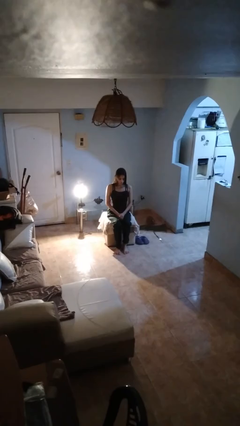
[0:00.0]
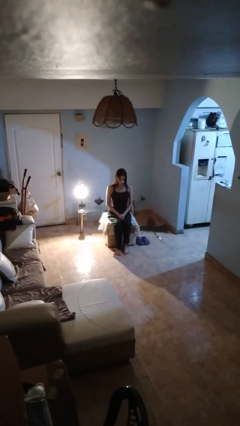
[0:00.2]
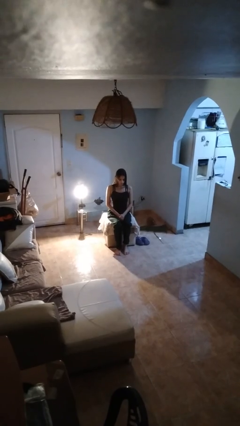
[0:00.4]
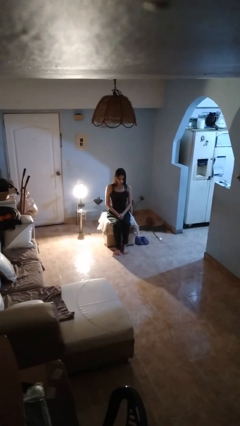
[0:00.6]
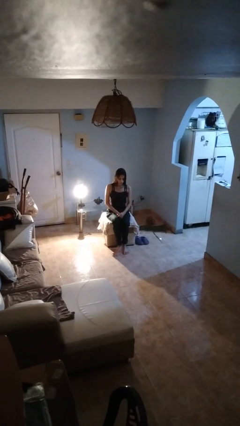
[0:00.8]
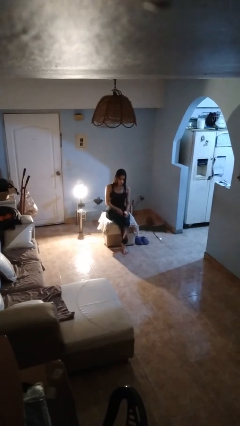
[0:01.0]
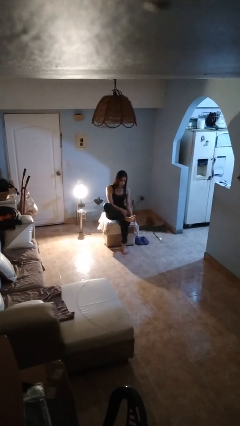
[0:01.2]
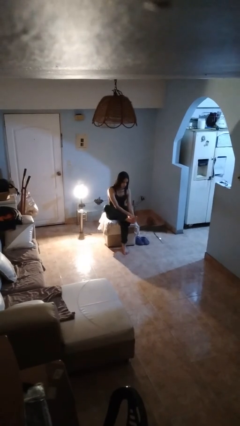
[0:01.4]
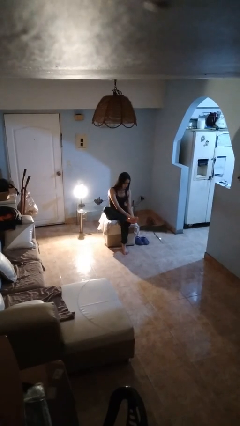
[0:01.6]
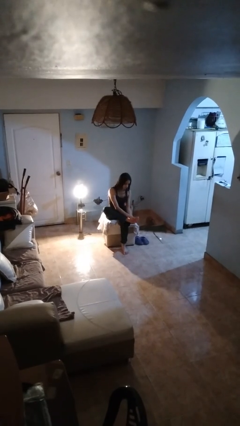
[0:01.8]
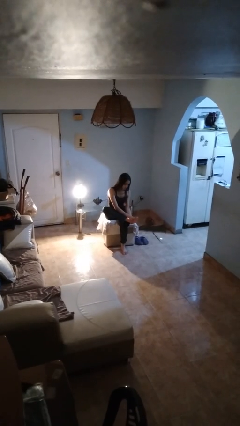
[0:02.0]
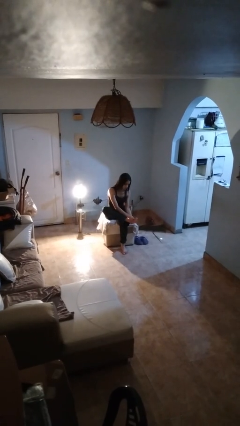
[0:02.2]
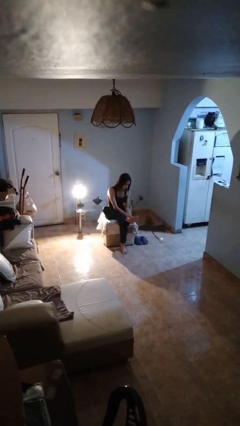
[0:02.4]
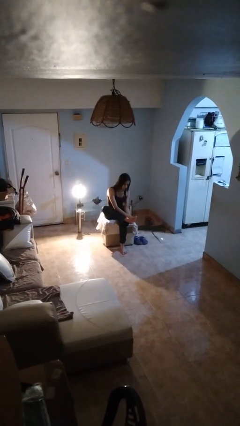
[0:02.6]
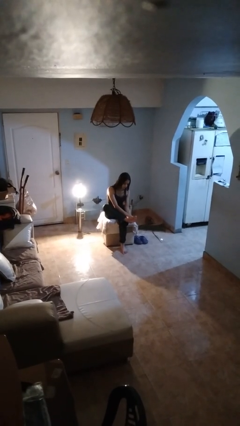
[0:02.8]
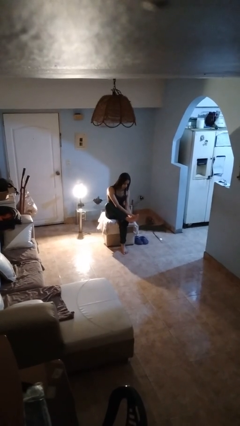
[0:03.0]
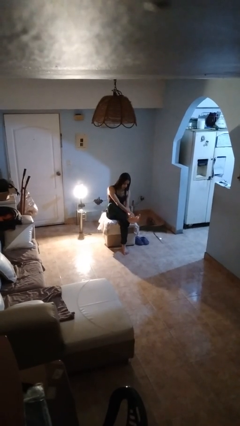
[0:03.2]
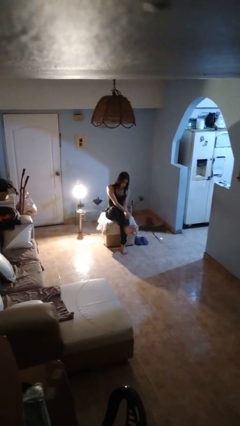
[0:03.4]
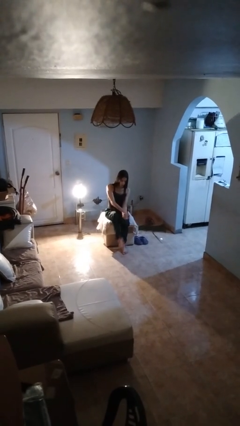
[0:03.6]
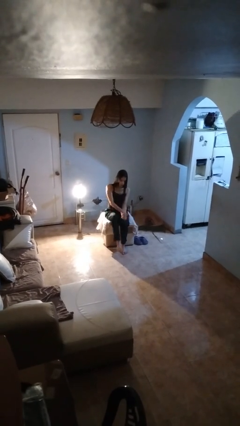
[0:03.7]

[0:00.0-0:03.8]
person rubs foot

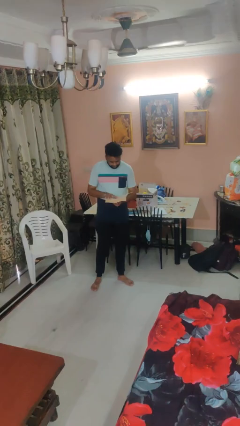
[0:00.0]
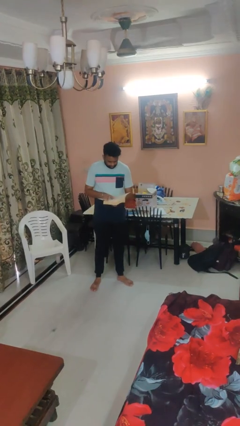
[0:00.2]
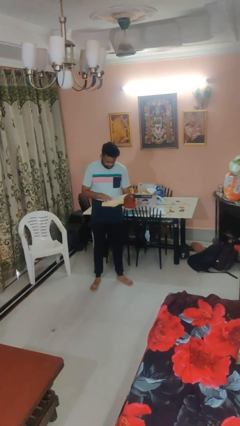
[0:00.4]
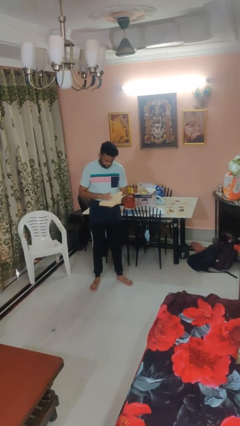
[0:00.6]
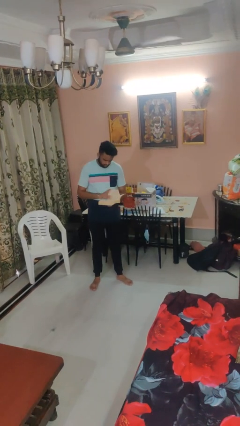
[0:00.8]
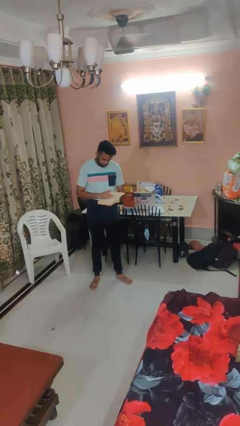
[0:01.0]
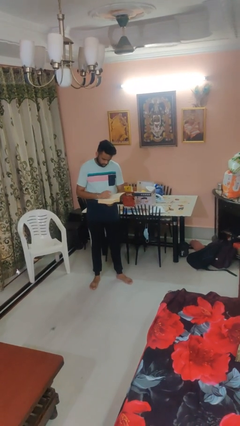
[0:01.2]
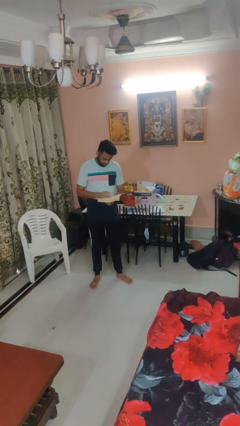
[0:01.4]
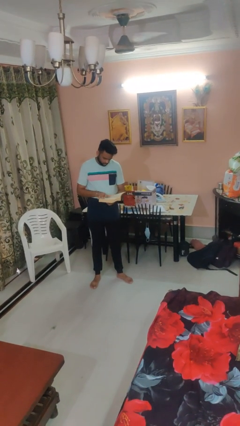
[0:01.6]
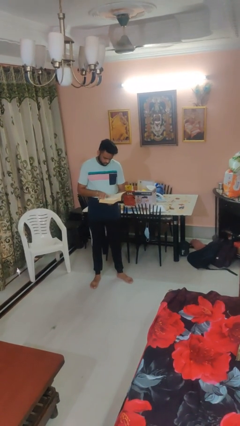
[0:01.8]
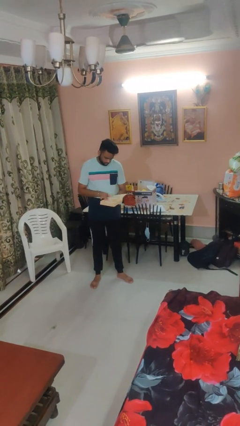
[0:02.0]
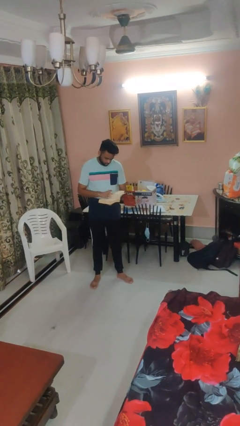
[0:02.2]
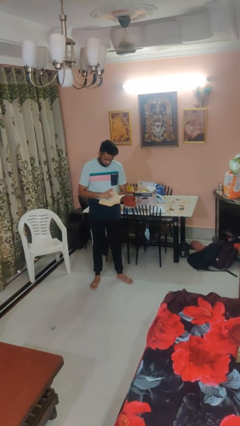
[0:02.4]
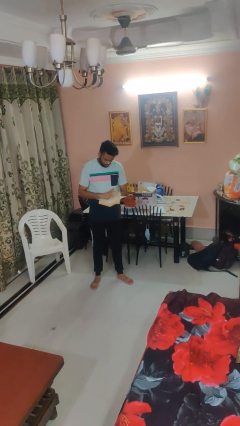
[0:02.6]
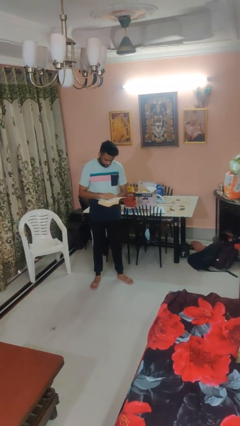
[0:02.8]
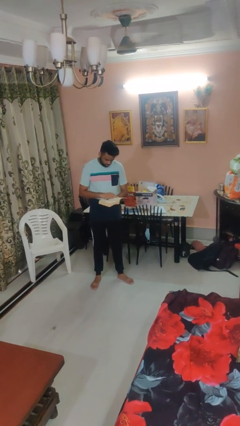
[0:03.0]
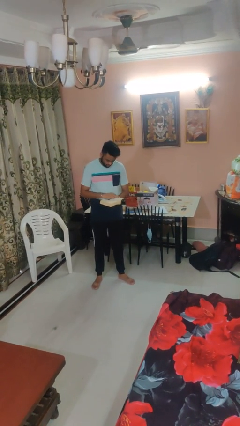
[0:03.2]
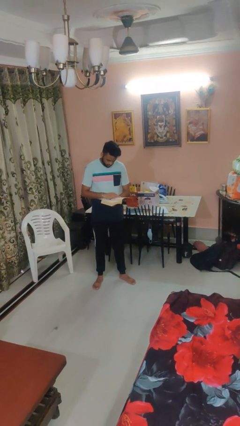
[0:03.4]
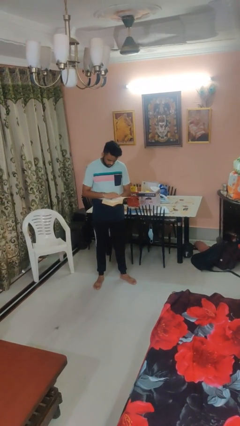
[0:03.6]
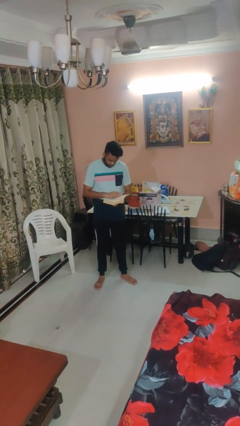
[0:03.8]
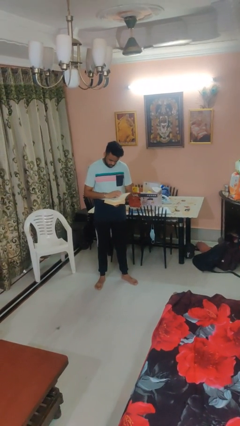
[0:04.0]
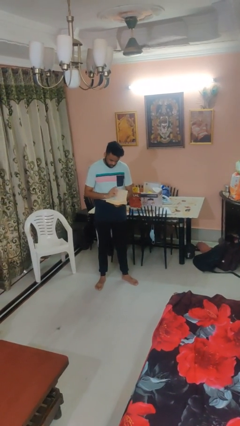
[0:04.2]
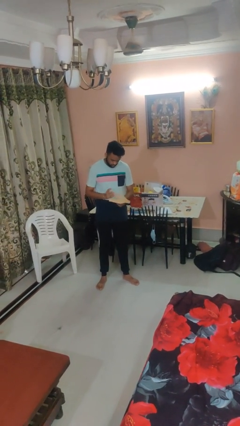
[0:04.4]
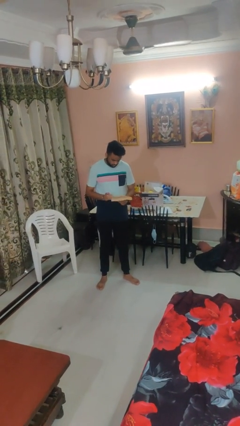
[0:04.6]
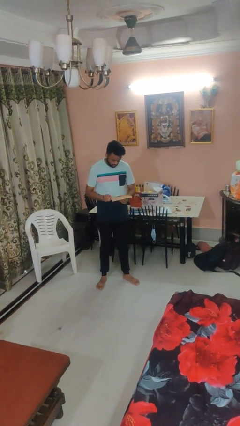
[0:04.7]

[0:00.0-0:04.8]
person reads book

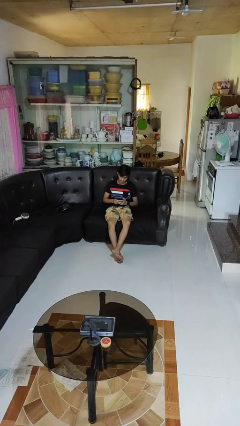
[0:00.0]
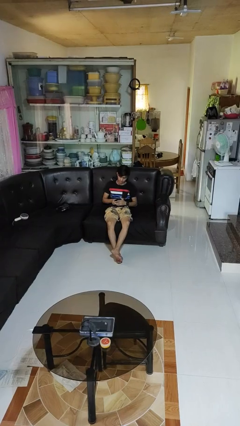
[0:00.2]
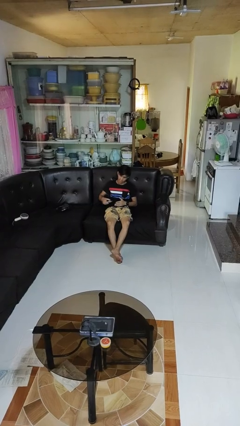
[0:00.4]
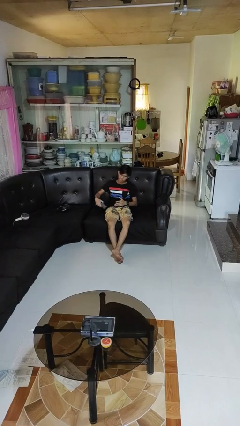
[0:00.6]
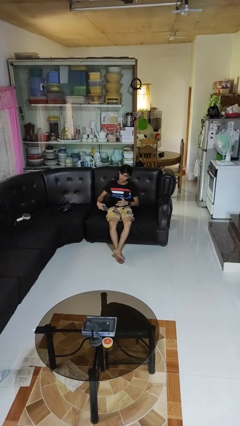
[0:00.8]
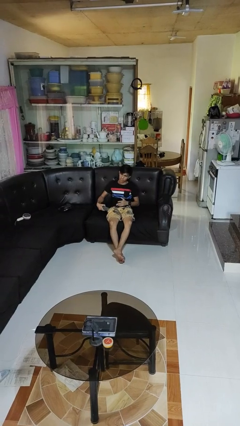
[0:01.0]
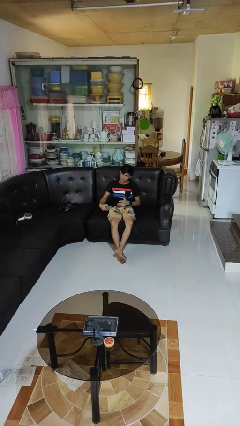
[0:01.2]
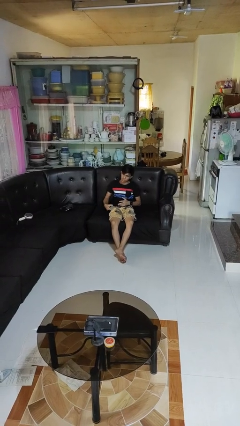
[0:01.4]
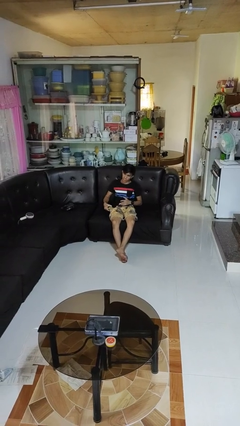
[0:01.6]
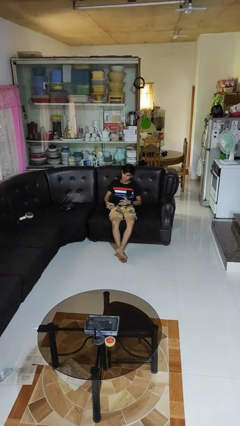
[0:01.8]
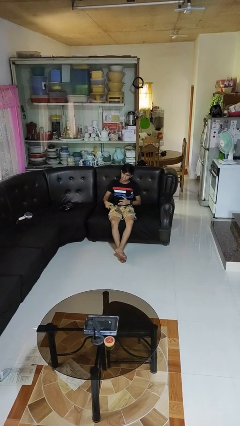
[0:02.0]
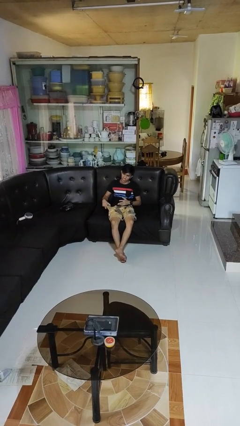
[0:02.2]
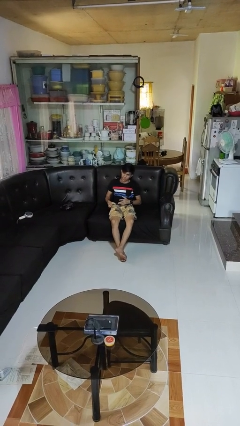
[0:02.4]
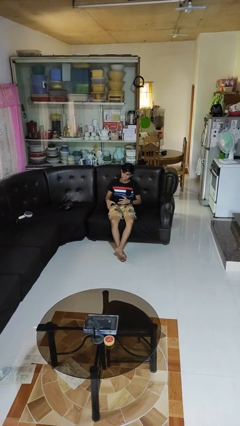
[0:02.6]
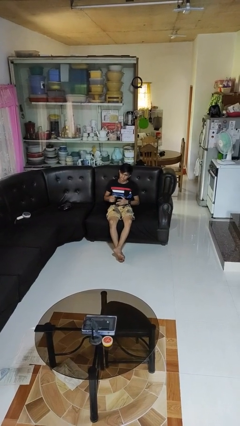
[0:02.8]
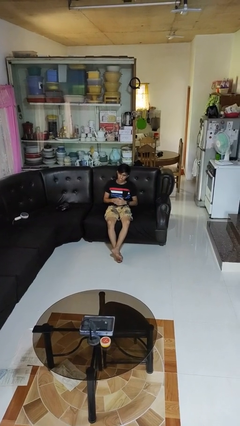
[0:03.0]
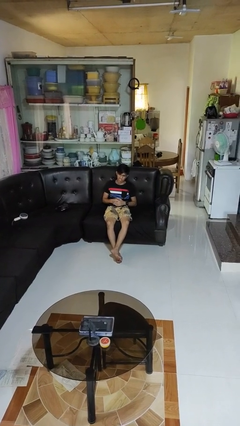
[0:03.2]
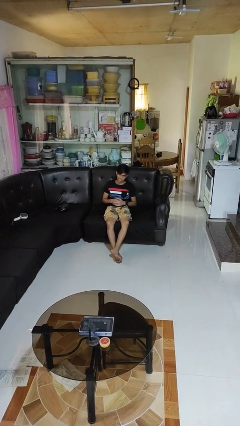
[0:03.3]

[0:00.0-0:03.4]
person puts phone into pocket

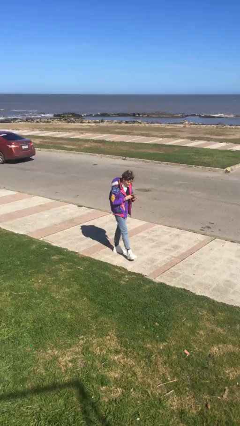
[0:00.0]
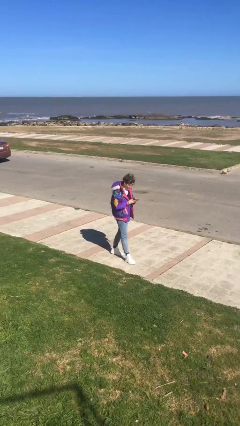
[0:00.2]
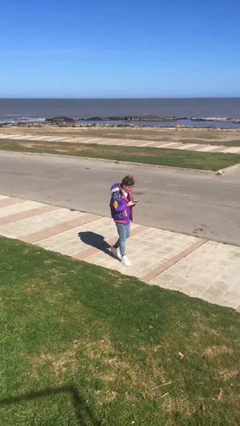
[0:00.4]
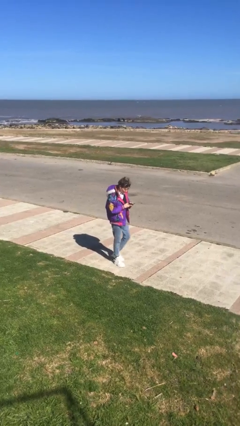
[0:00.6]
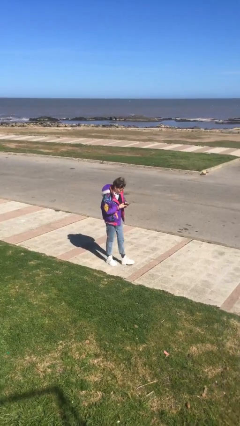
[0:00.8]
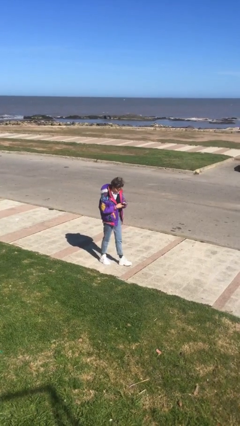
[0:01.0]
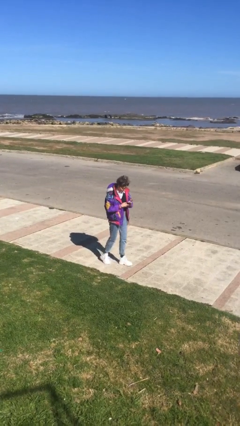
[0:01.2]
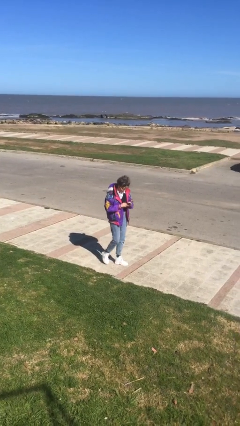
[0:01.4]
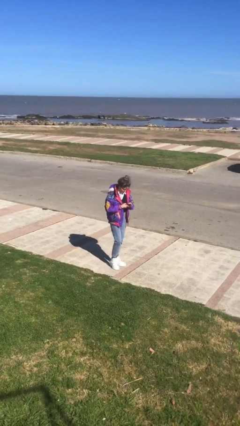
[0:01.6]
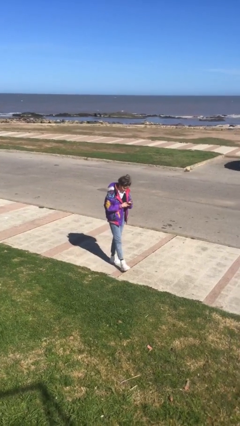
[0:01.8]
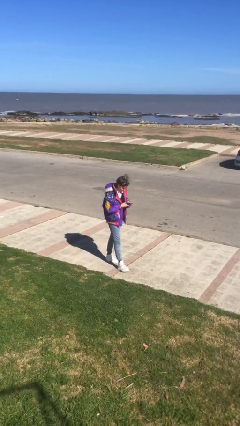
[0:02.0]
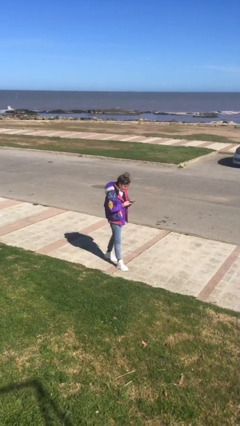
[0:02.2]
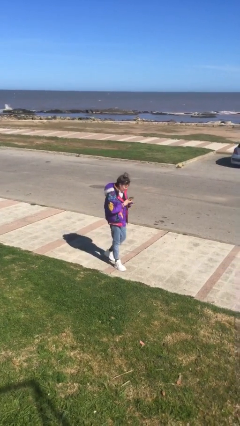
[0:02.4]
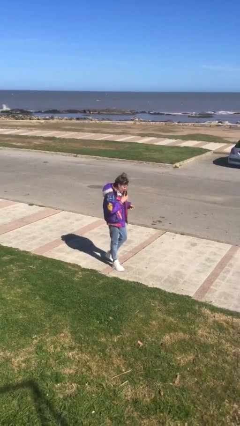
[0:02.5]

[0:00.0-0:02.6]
person texts on phone

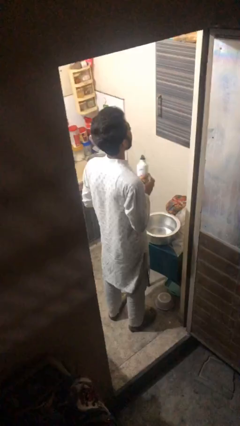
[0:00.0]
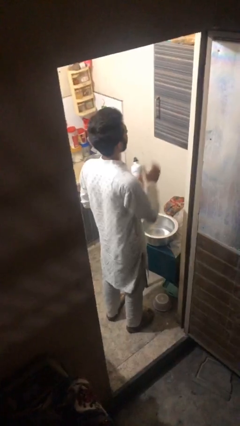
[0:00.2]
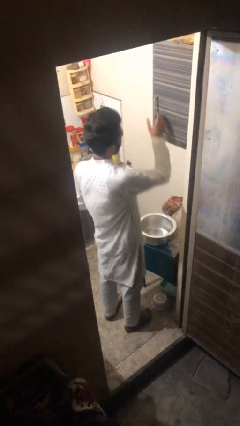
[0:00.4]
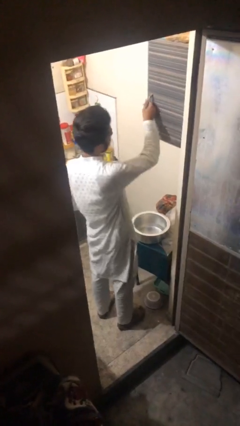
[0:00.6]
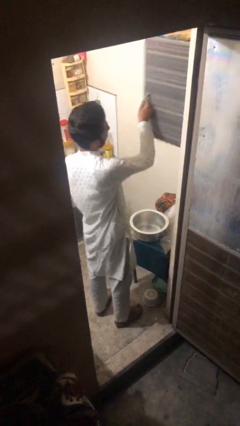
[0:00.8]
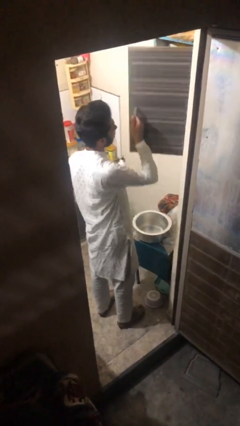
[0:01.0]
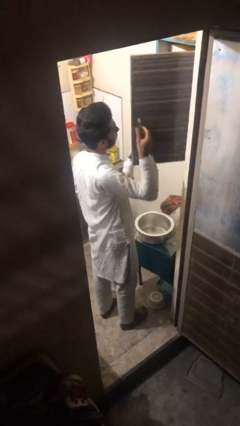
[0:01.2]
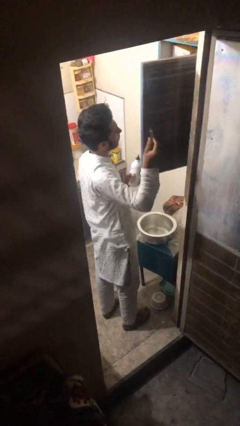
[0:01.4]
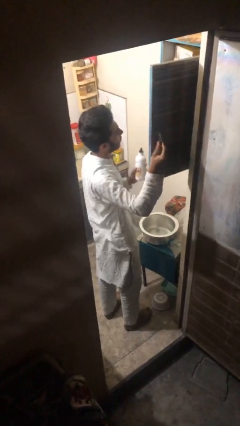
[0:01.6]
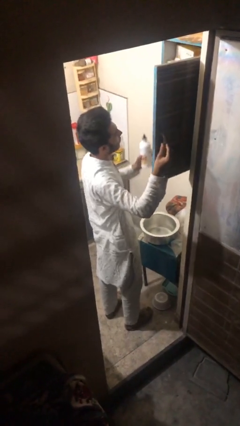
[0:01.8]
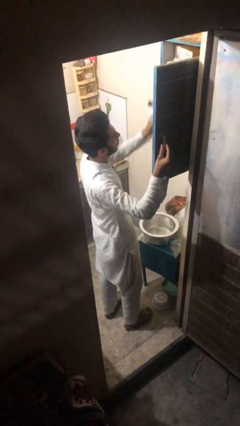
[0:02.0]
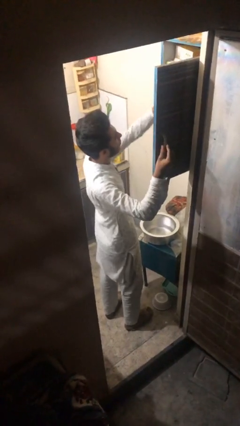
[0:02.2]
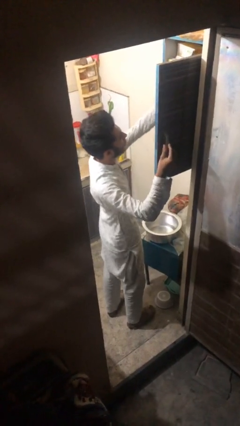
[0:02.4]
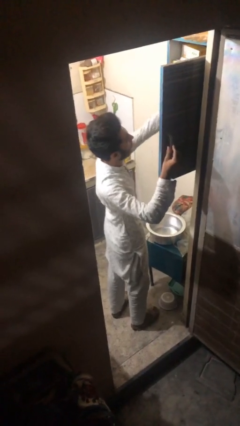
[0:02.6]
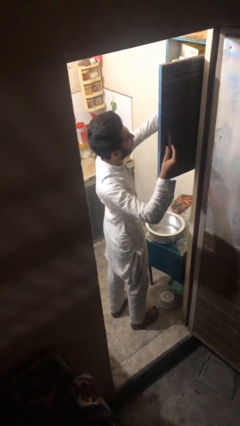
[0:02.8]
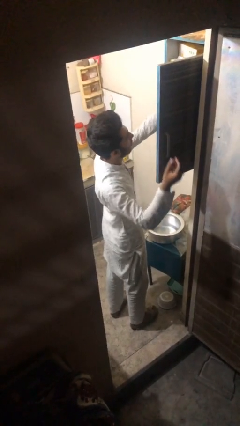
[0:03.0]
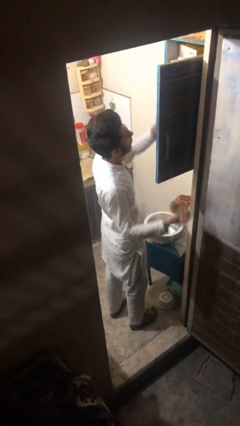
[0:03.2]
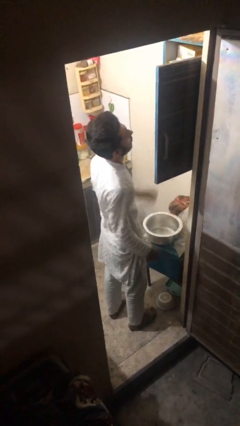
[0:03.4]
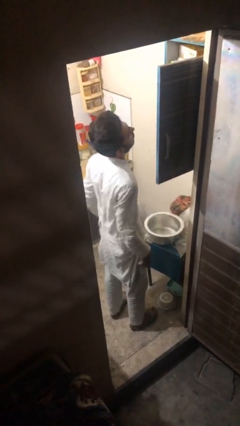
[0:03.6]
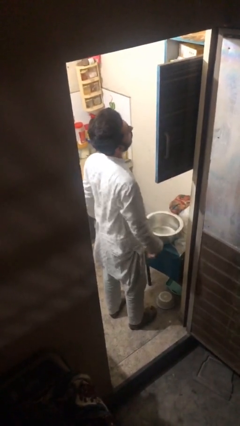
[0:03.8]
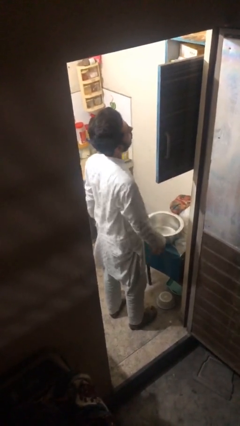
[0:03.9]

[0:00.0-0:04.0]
person puts object in cabinet
